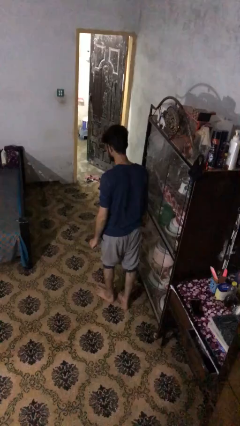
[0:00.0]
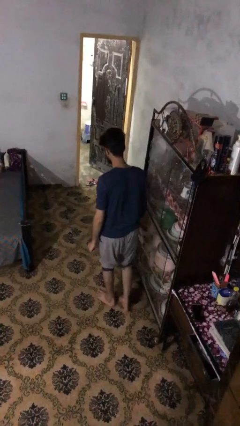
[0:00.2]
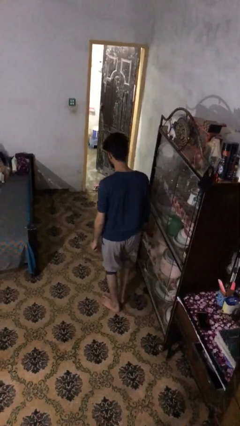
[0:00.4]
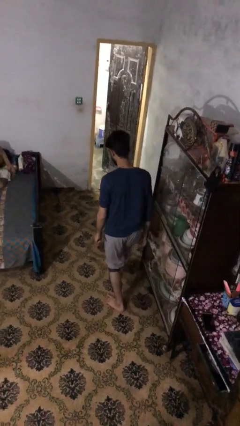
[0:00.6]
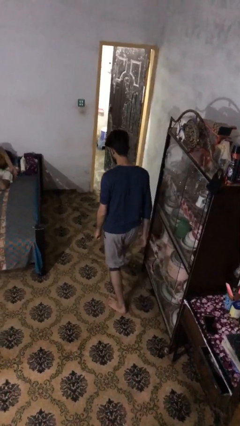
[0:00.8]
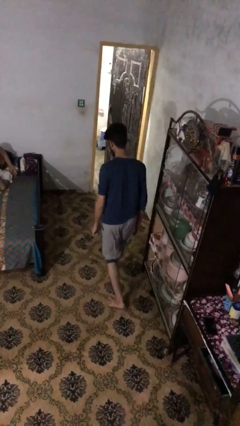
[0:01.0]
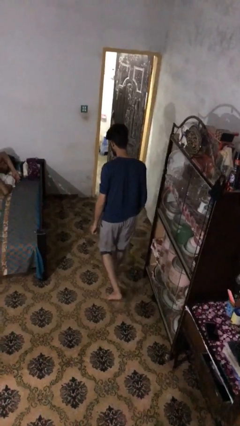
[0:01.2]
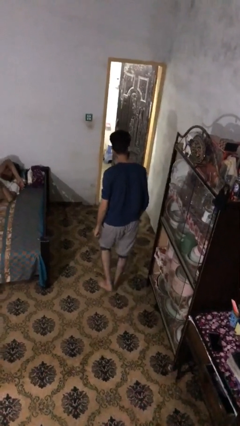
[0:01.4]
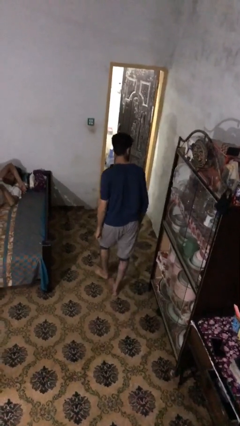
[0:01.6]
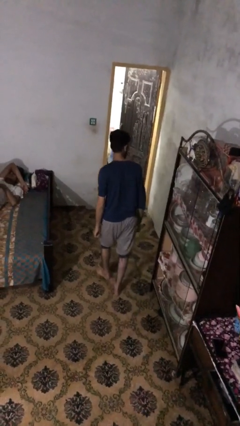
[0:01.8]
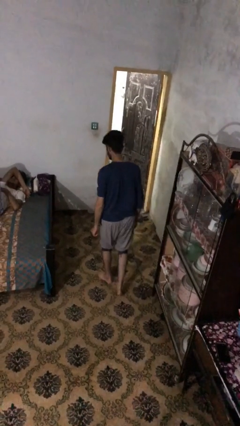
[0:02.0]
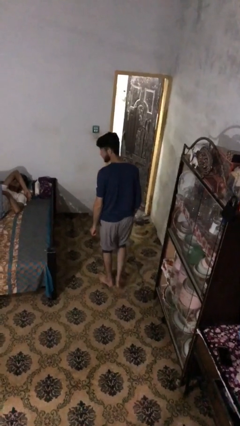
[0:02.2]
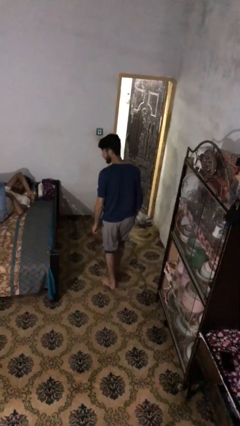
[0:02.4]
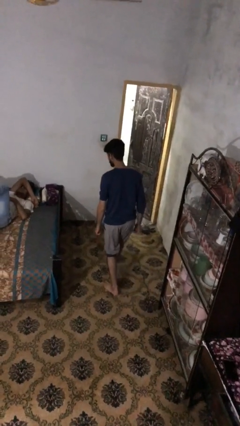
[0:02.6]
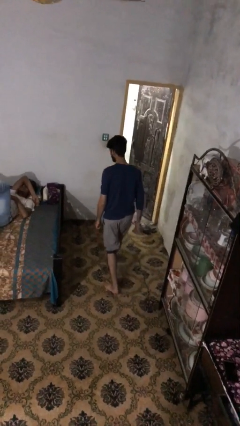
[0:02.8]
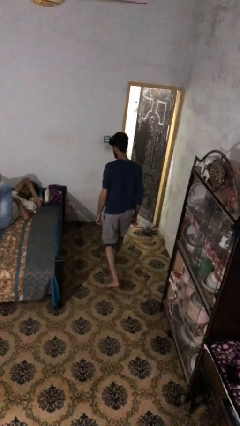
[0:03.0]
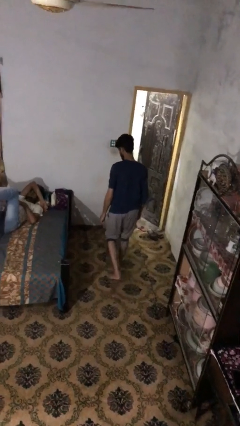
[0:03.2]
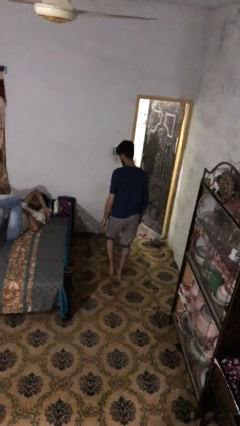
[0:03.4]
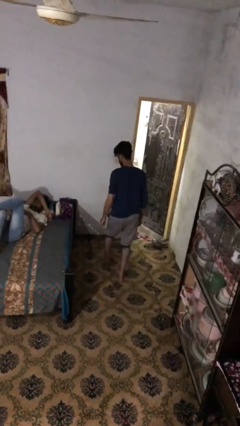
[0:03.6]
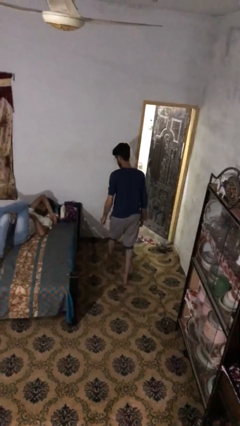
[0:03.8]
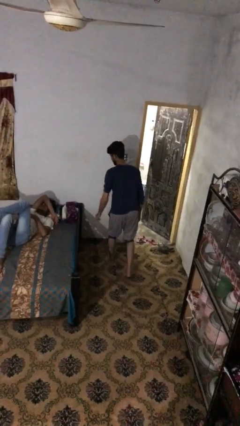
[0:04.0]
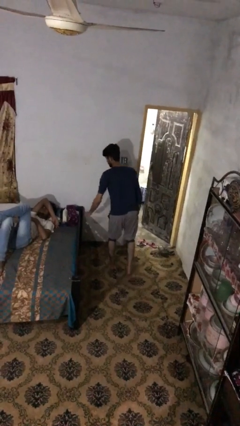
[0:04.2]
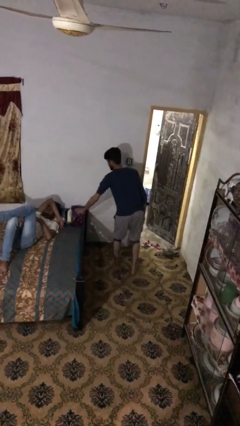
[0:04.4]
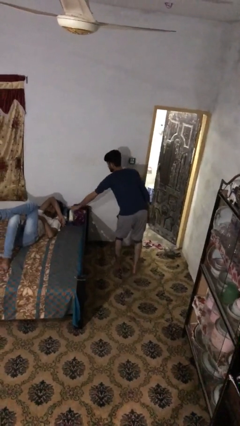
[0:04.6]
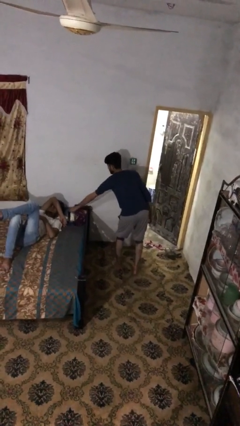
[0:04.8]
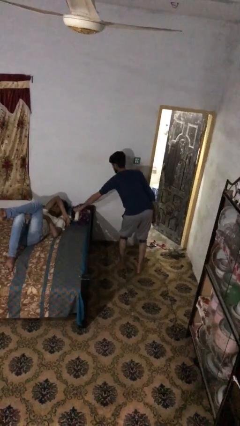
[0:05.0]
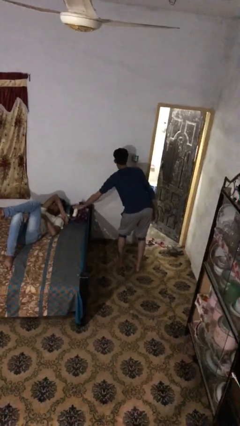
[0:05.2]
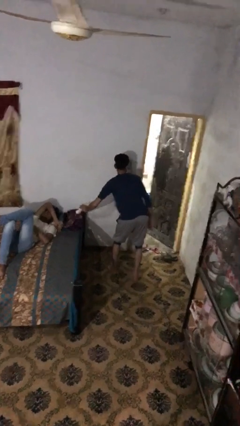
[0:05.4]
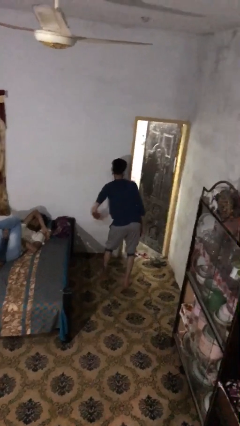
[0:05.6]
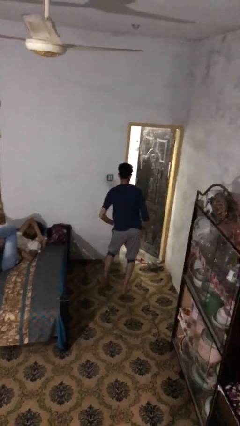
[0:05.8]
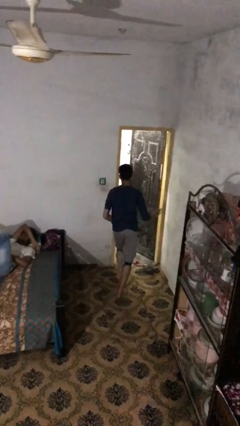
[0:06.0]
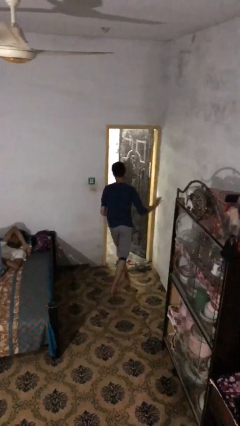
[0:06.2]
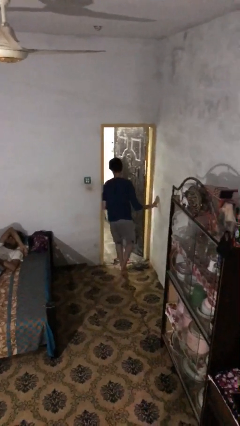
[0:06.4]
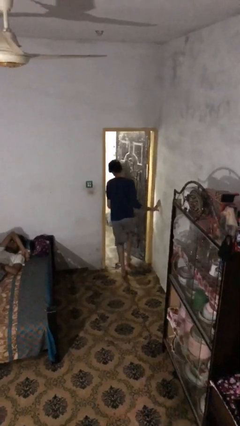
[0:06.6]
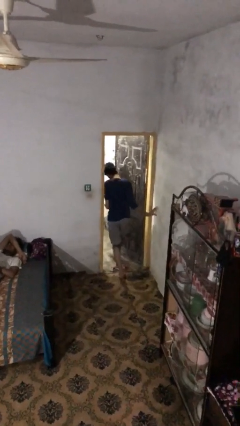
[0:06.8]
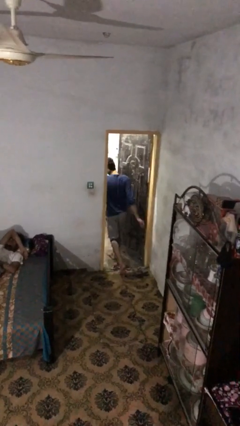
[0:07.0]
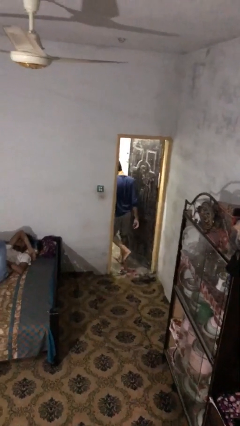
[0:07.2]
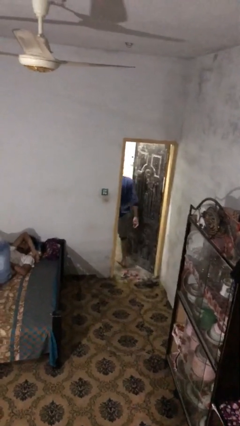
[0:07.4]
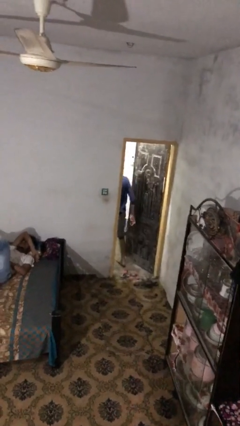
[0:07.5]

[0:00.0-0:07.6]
person steals object from person

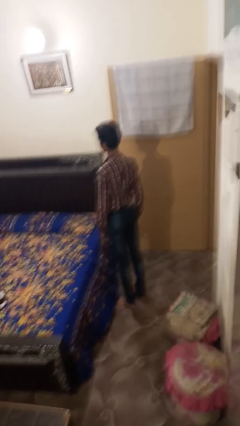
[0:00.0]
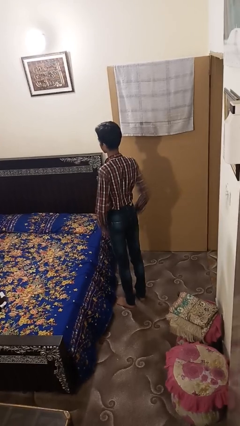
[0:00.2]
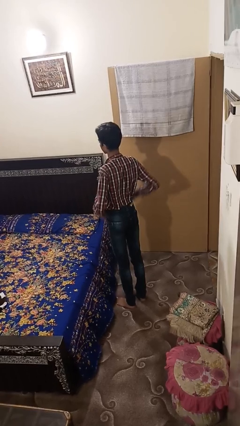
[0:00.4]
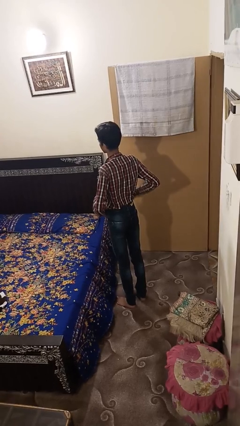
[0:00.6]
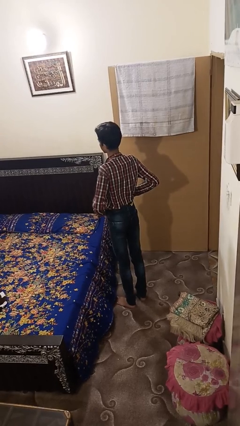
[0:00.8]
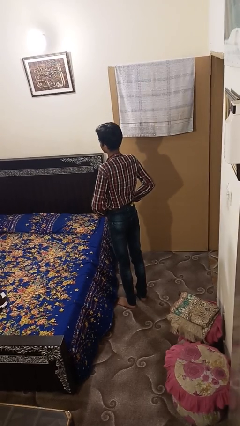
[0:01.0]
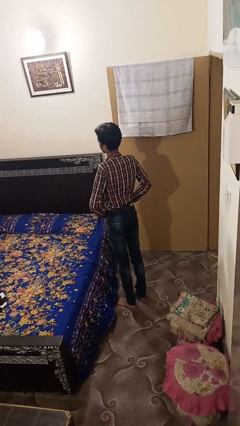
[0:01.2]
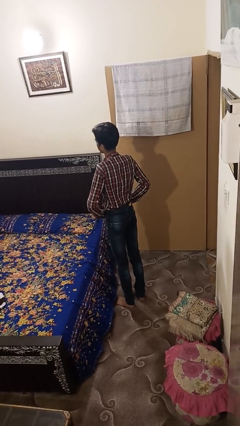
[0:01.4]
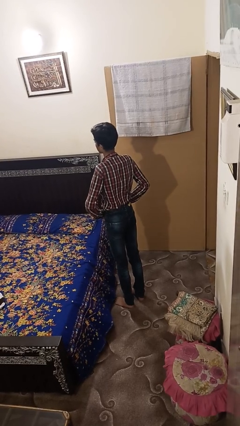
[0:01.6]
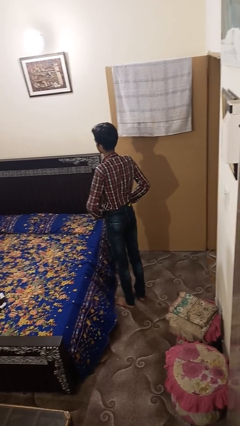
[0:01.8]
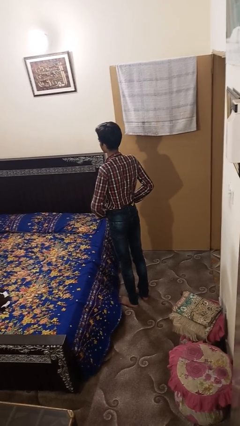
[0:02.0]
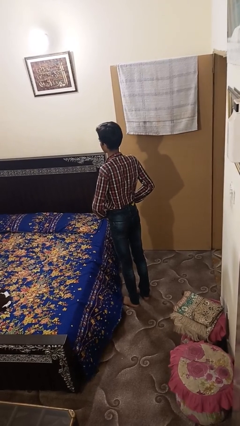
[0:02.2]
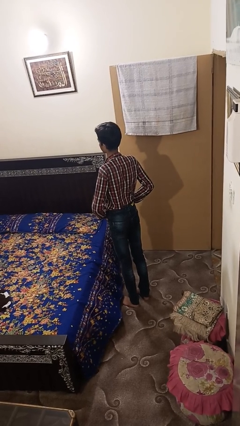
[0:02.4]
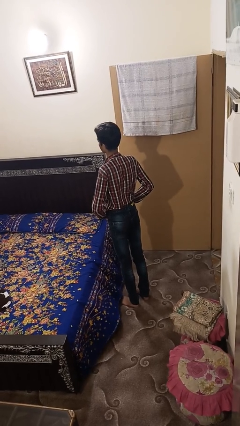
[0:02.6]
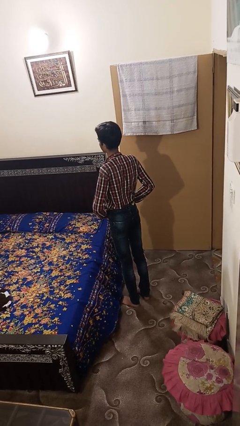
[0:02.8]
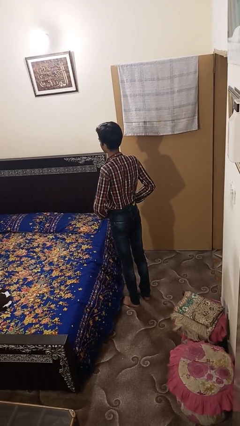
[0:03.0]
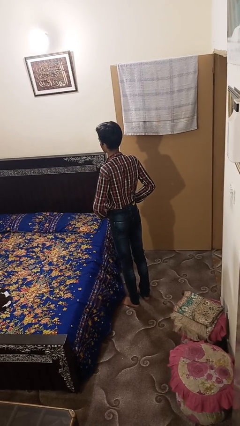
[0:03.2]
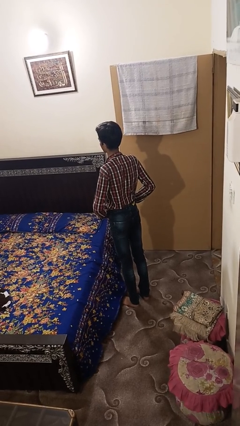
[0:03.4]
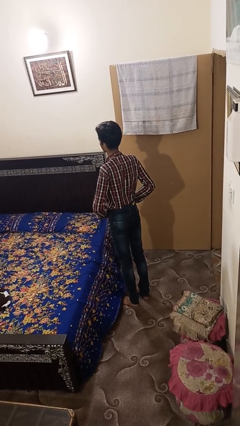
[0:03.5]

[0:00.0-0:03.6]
person puts hands in back pockets

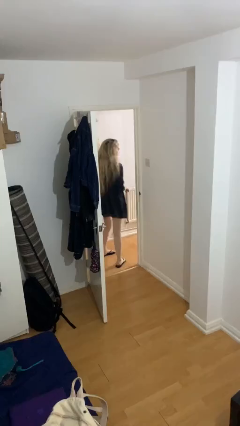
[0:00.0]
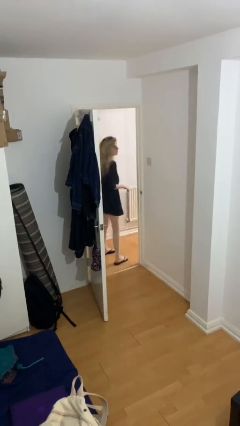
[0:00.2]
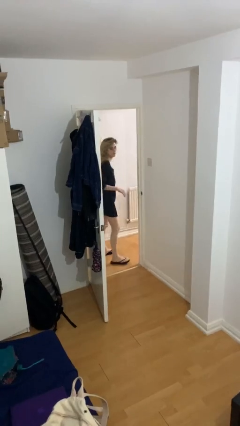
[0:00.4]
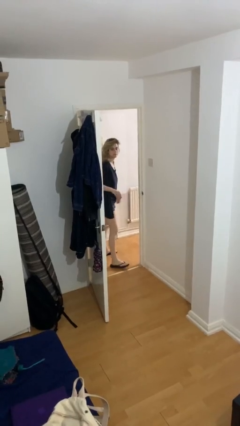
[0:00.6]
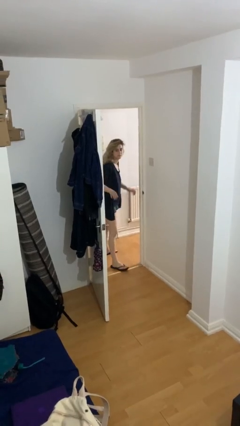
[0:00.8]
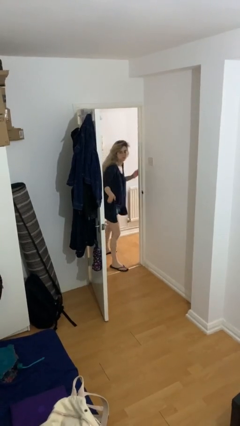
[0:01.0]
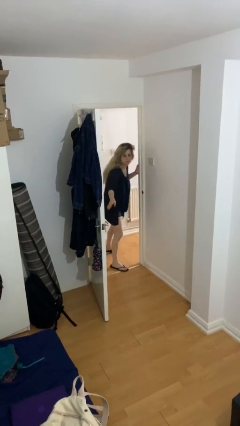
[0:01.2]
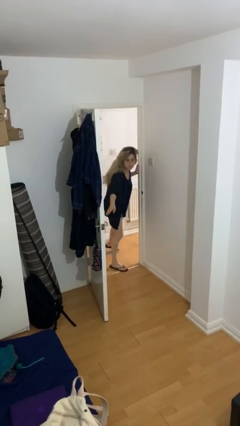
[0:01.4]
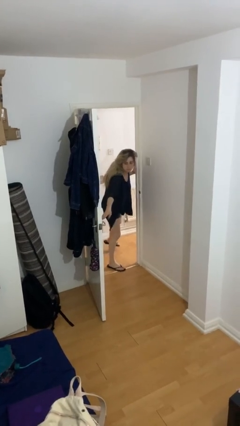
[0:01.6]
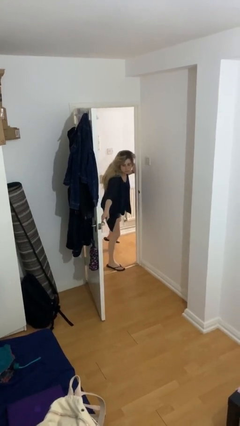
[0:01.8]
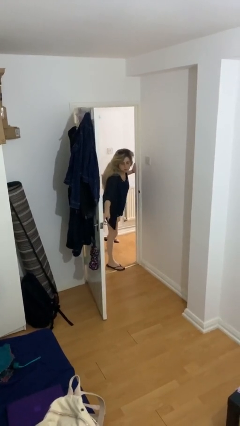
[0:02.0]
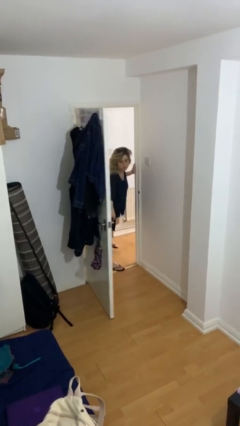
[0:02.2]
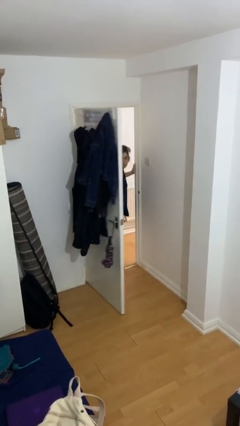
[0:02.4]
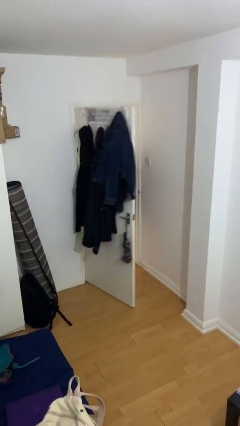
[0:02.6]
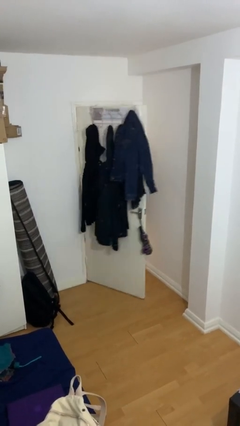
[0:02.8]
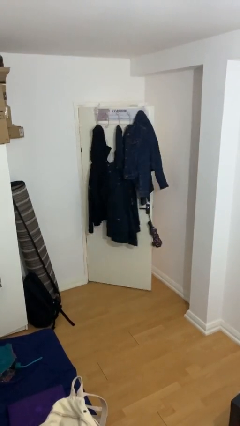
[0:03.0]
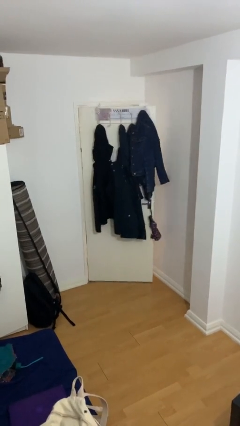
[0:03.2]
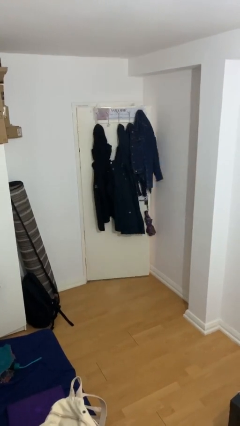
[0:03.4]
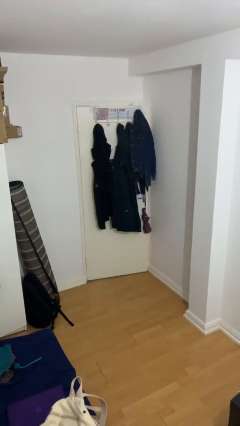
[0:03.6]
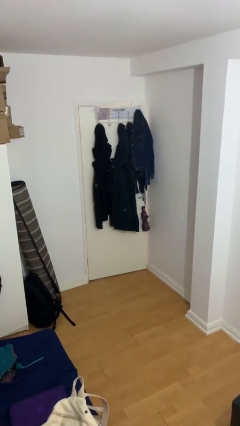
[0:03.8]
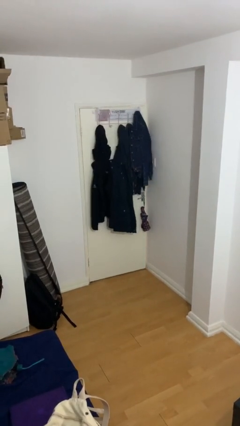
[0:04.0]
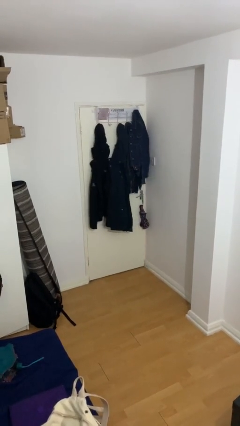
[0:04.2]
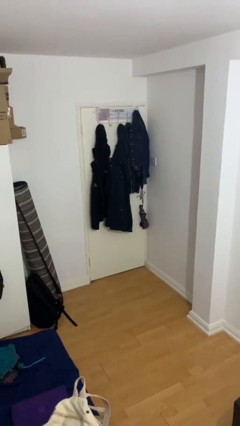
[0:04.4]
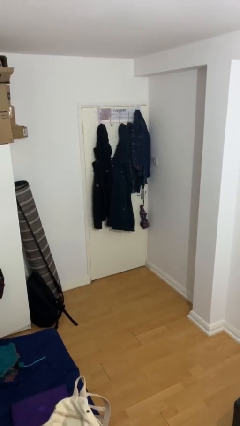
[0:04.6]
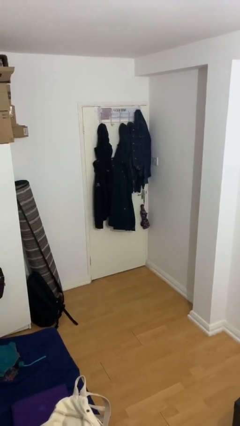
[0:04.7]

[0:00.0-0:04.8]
person closes facility door

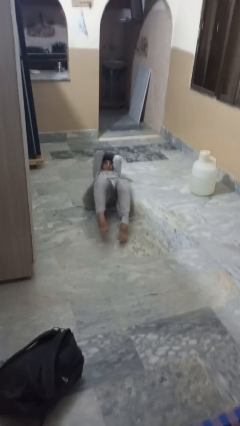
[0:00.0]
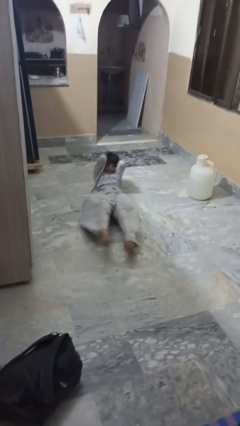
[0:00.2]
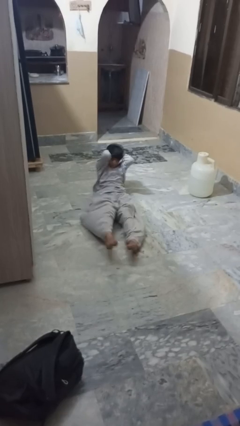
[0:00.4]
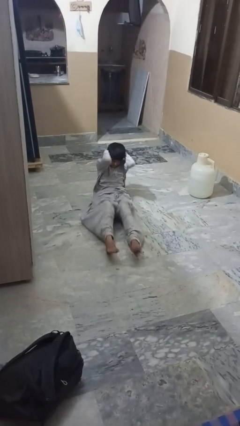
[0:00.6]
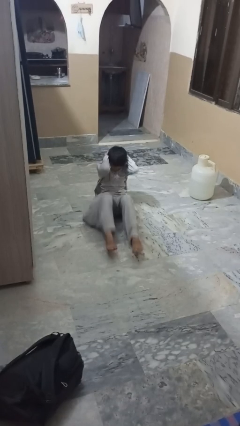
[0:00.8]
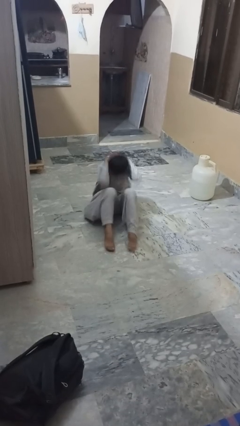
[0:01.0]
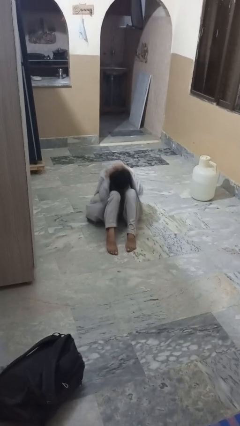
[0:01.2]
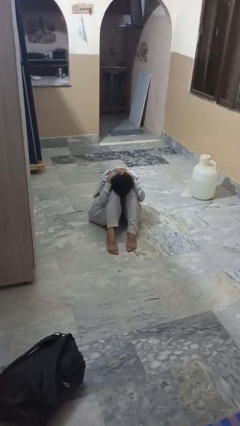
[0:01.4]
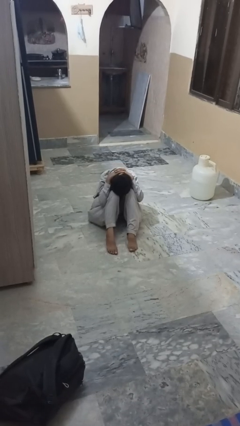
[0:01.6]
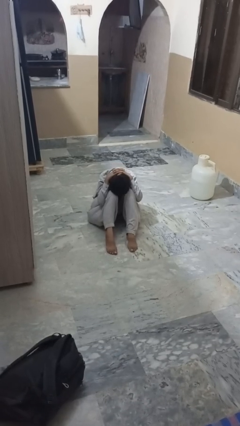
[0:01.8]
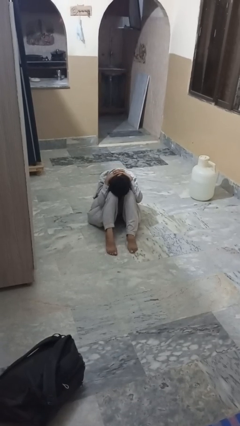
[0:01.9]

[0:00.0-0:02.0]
person exercises with situp
